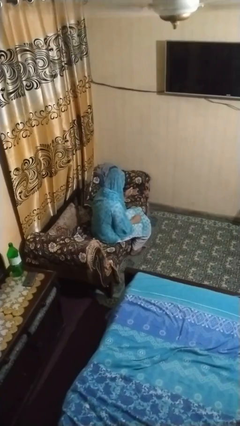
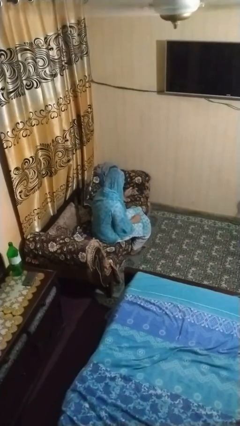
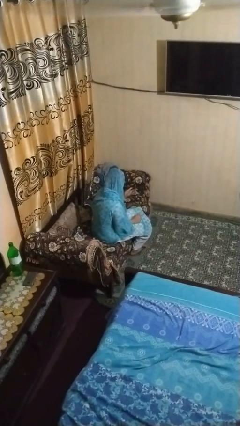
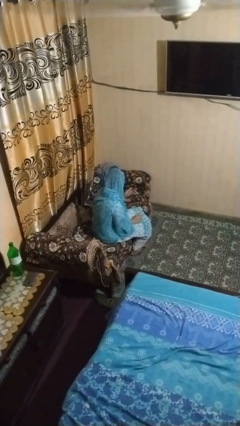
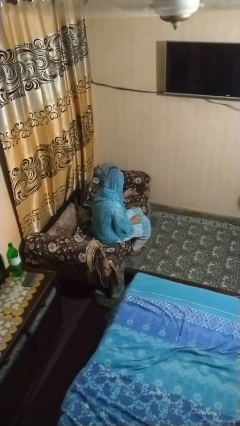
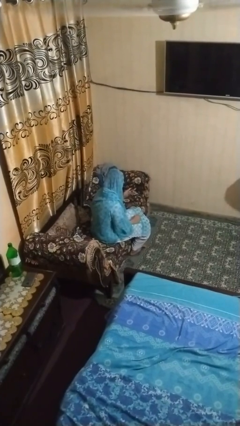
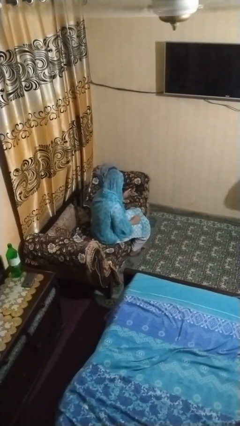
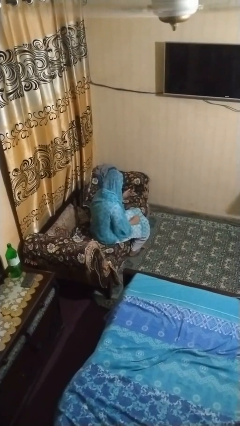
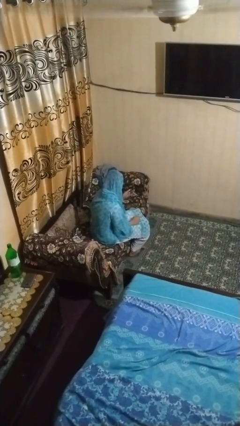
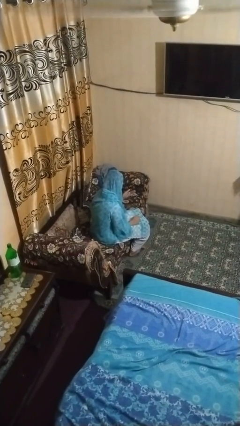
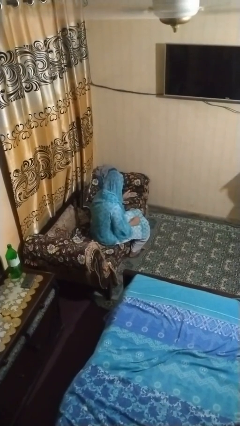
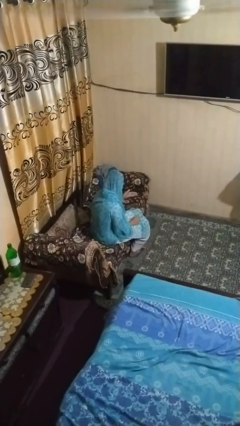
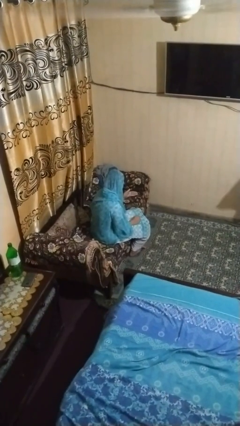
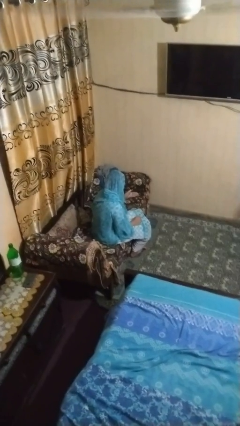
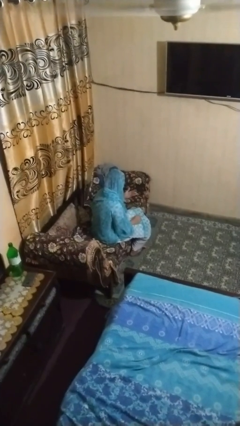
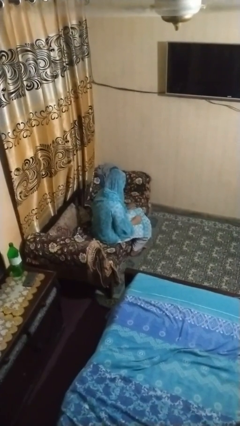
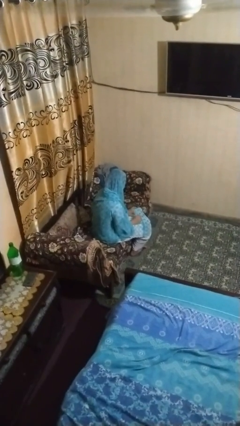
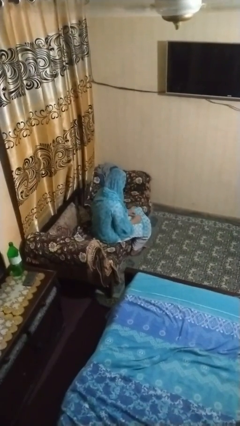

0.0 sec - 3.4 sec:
person looks at hands in lap

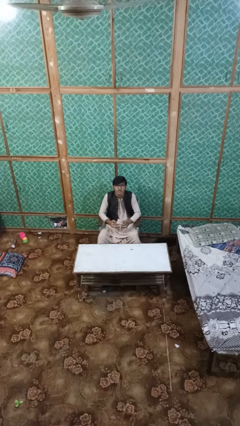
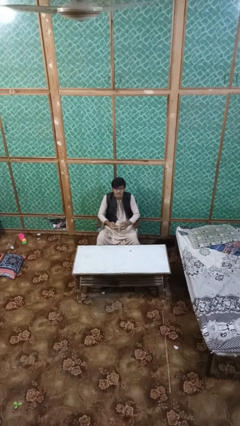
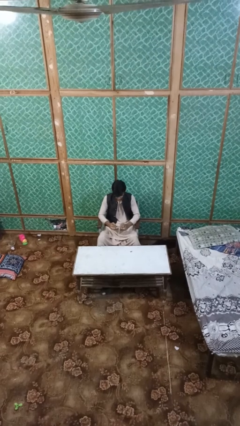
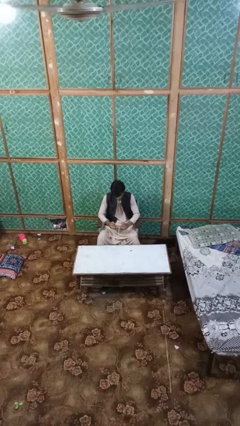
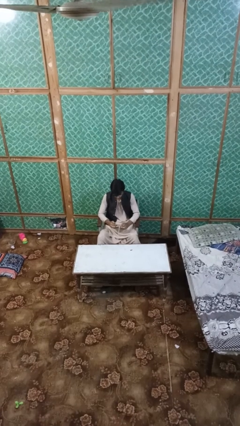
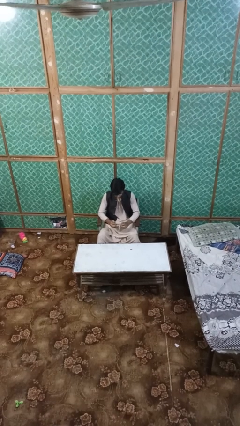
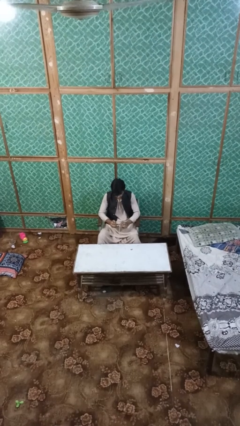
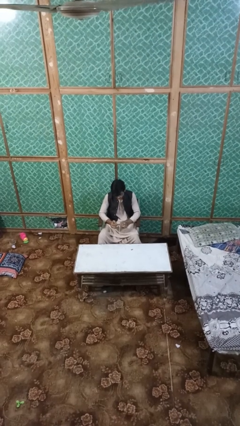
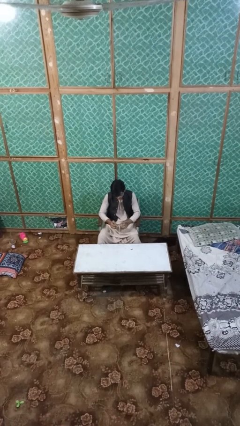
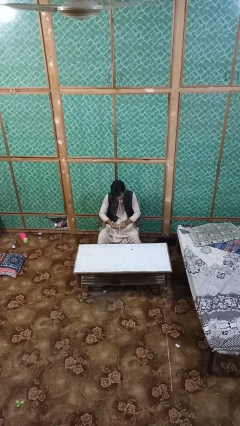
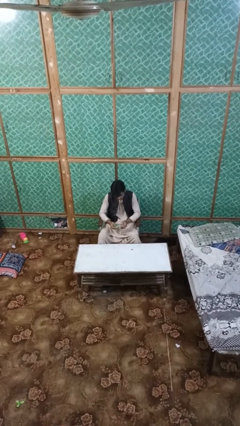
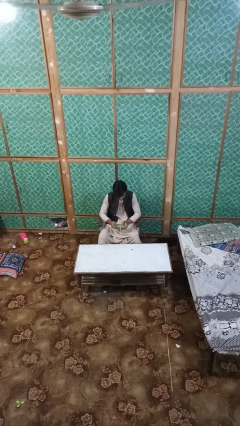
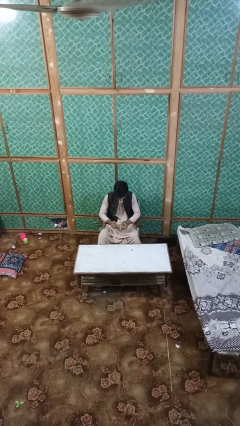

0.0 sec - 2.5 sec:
person interacts with handheld game

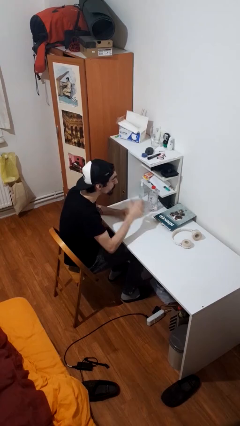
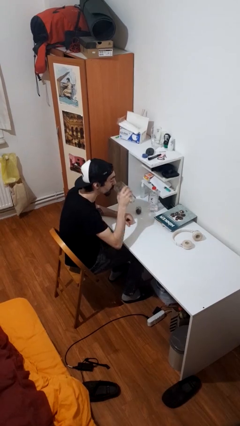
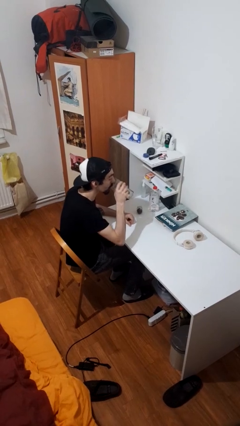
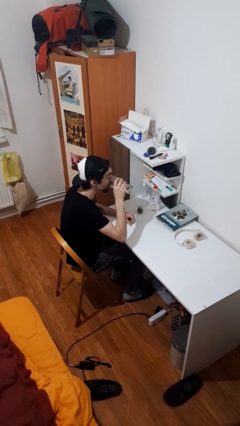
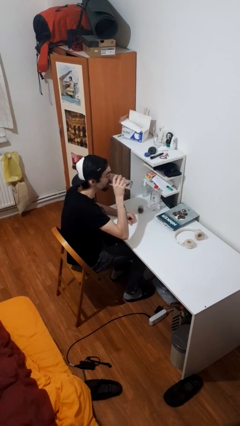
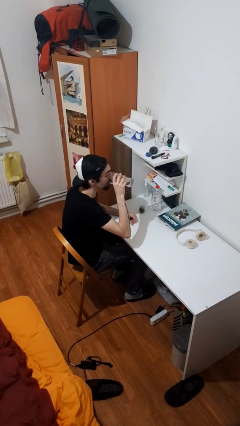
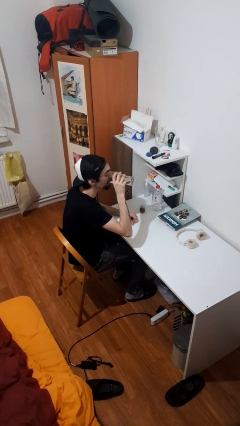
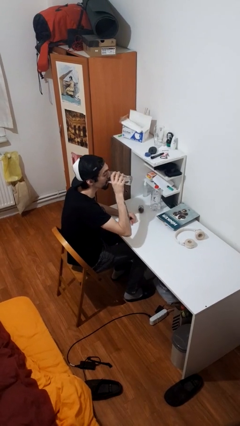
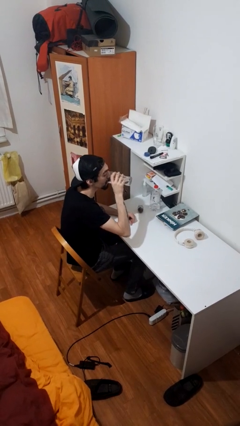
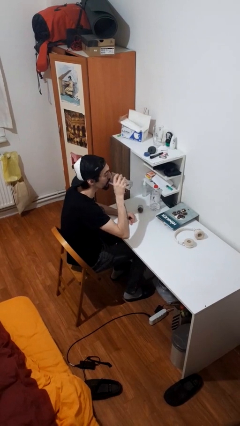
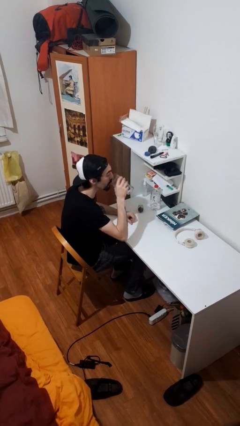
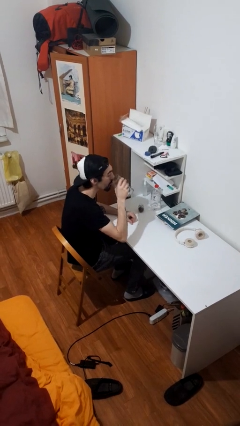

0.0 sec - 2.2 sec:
person drinks from cup

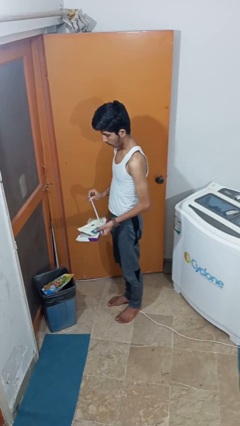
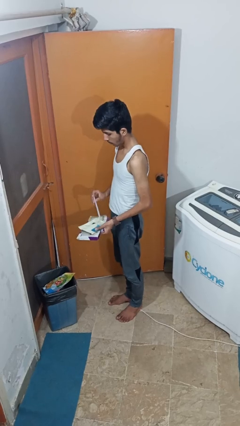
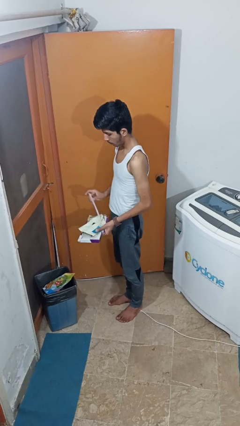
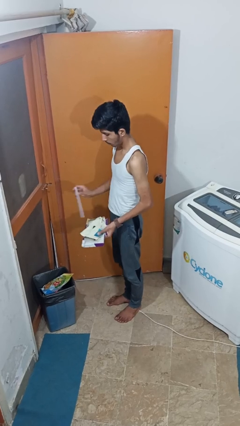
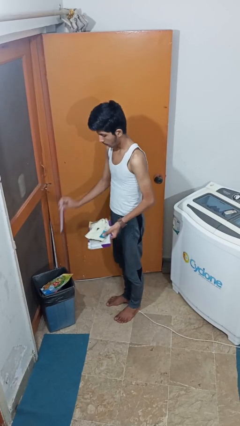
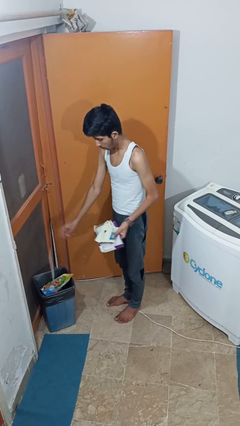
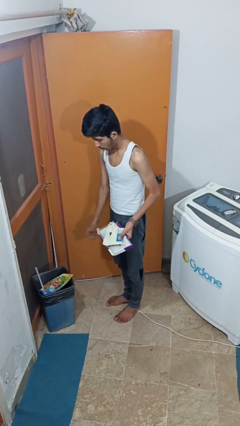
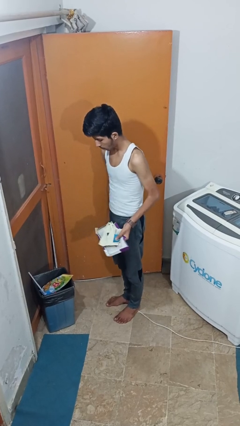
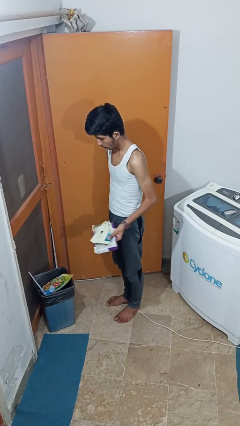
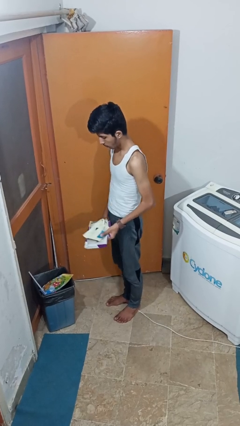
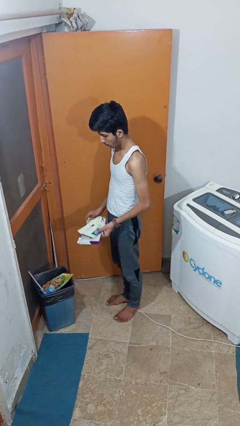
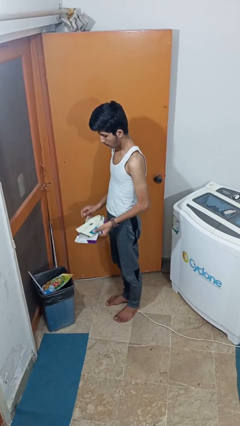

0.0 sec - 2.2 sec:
person discards trash

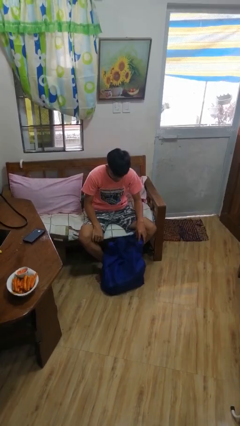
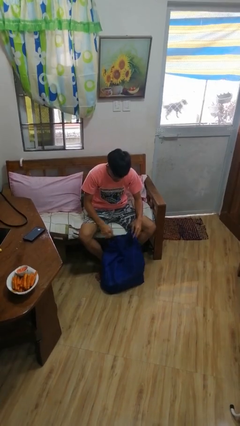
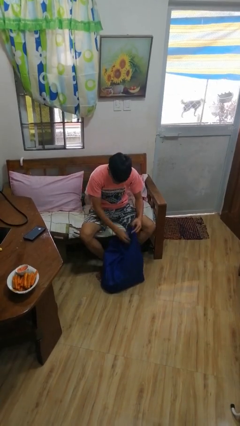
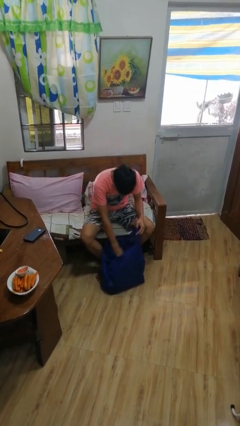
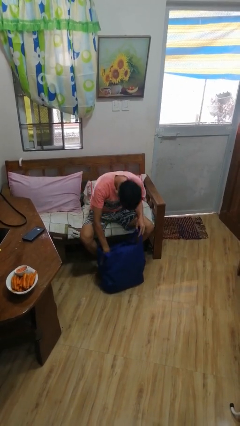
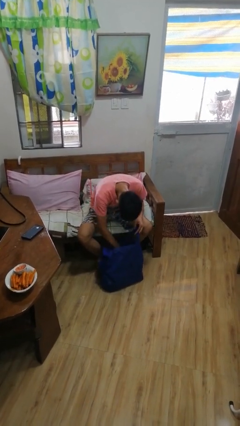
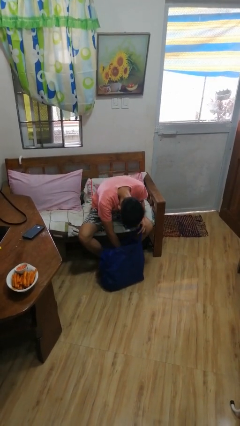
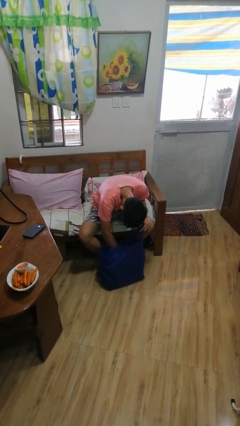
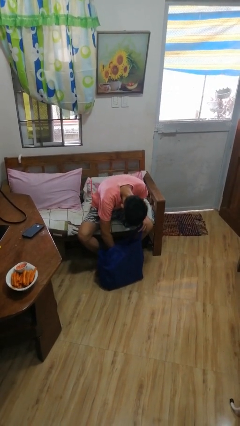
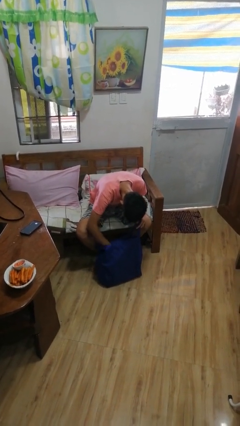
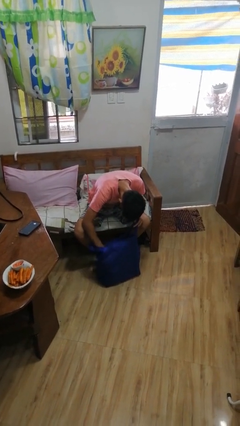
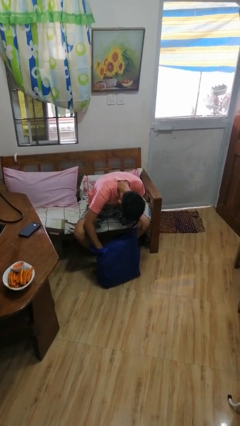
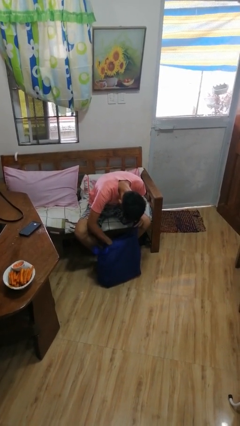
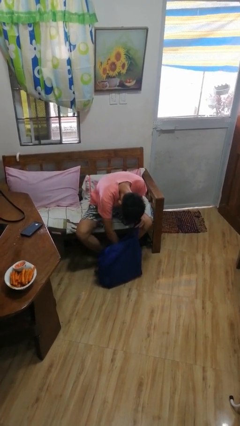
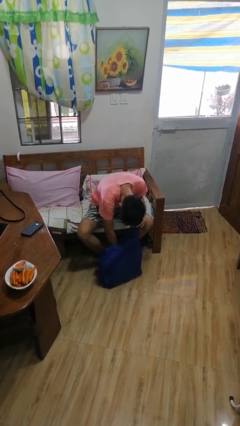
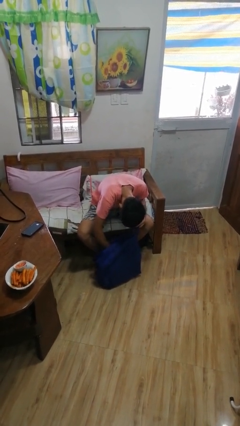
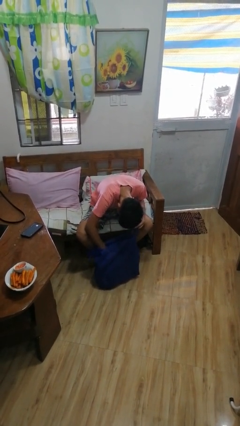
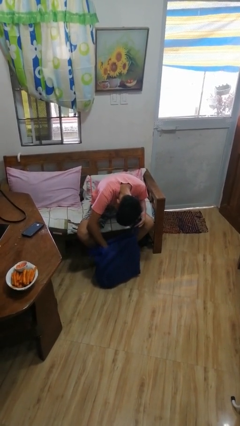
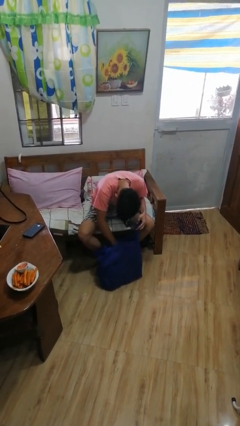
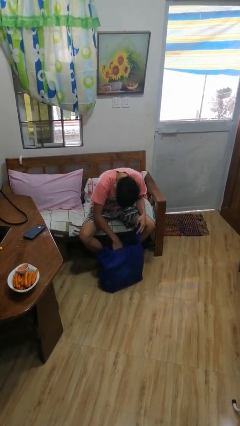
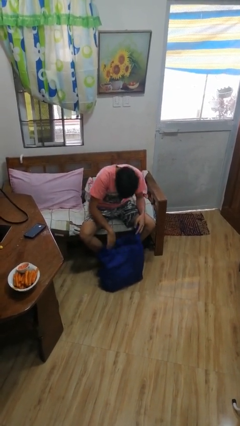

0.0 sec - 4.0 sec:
person searches in bag

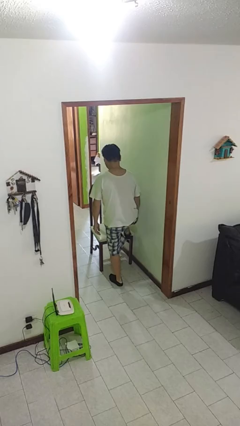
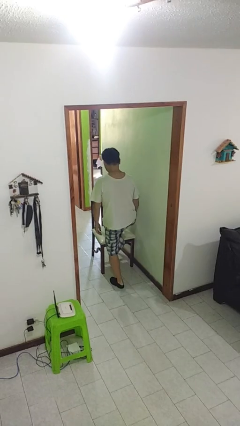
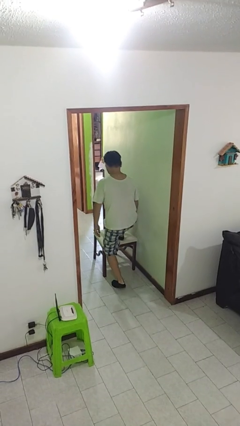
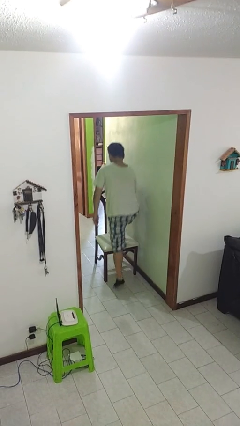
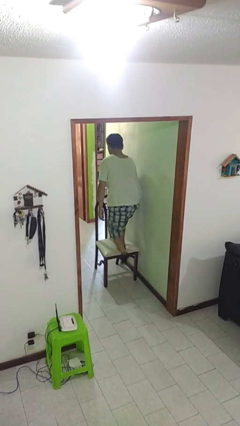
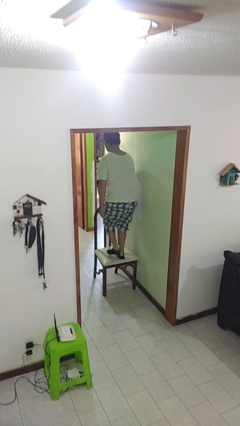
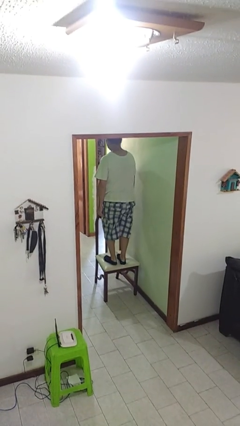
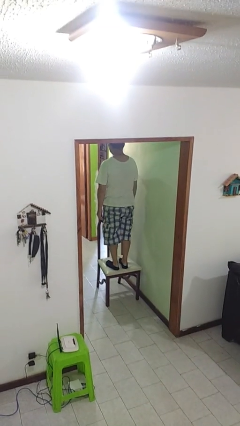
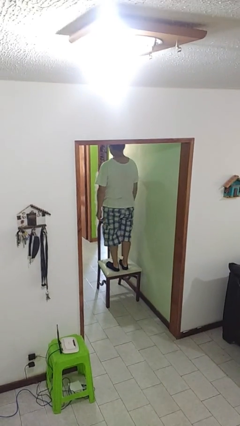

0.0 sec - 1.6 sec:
person climbs on chair

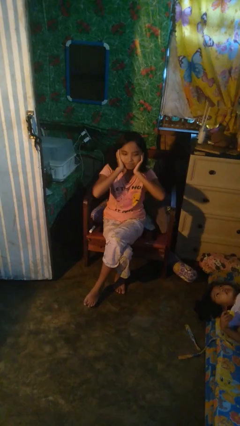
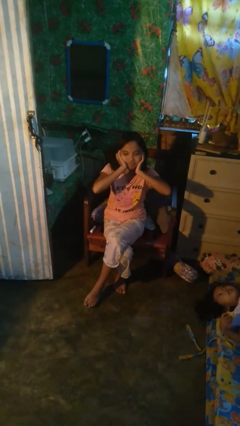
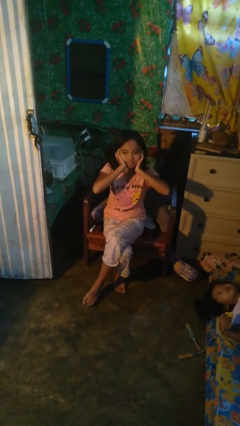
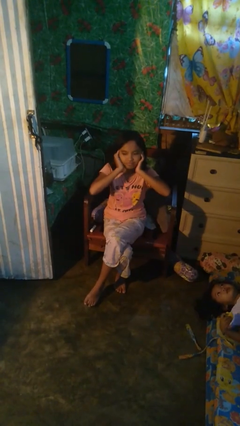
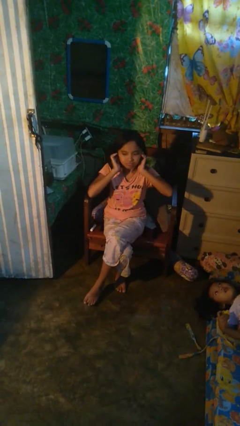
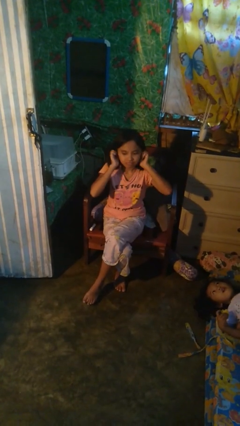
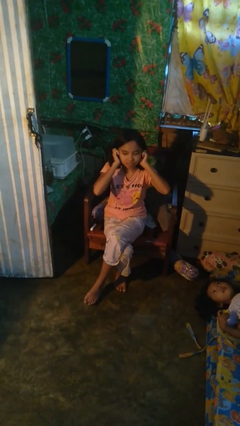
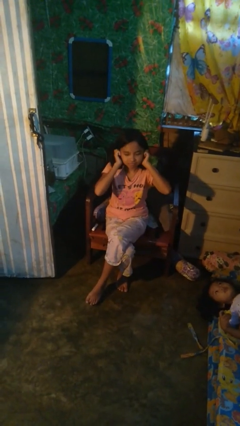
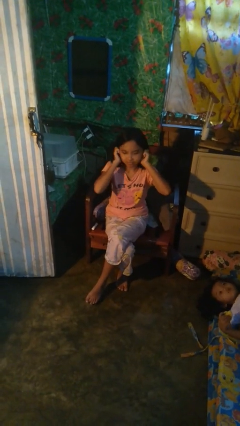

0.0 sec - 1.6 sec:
person puts fingers in ear
